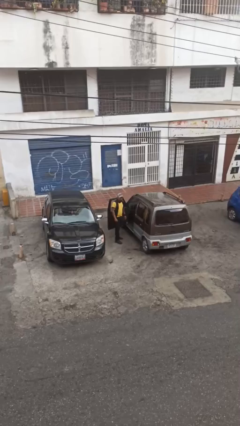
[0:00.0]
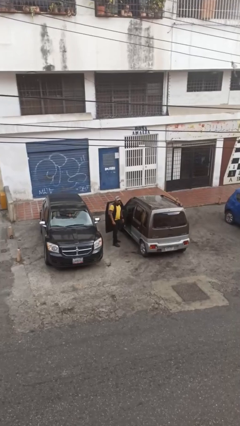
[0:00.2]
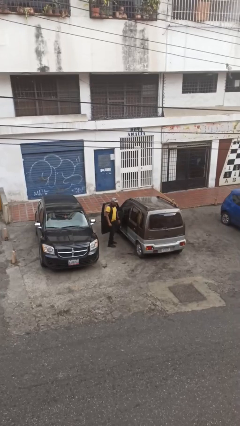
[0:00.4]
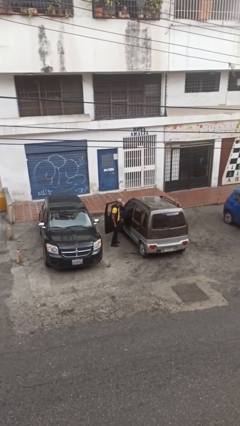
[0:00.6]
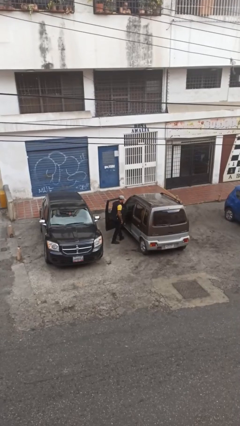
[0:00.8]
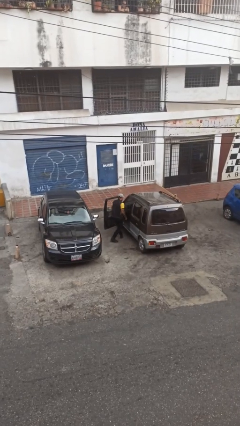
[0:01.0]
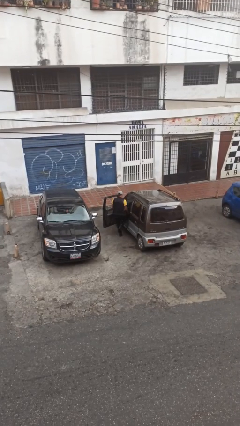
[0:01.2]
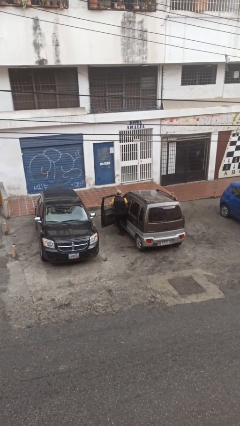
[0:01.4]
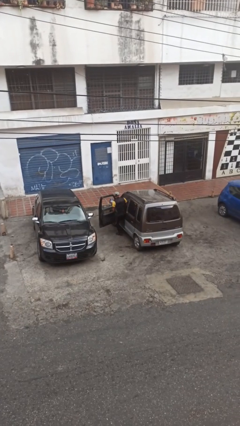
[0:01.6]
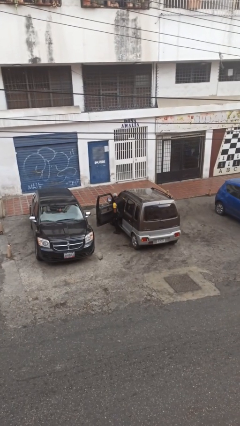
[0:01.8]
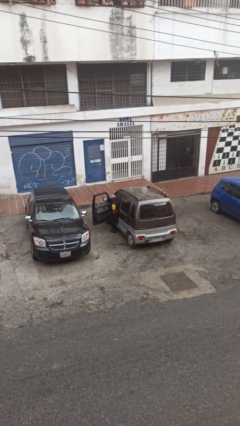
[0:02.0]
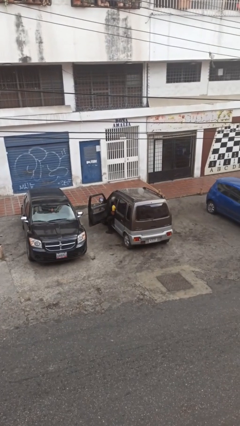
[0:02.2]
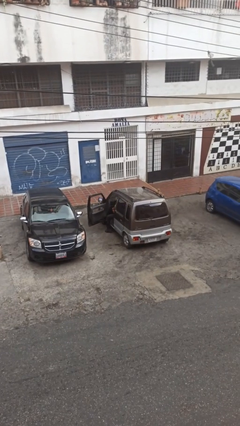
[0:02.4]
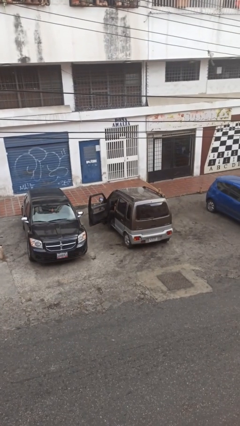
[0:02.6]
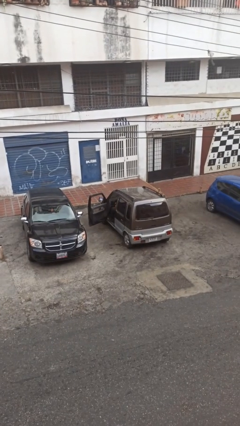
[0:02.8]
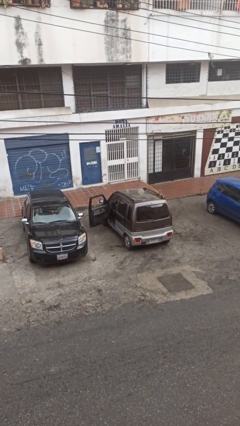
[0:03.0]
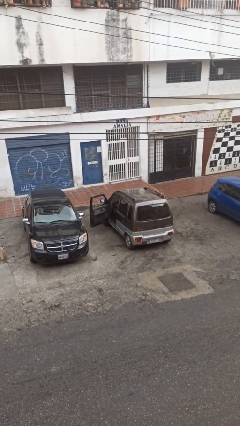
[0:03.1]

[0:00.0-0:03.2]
person enters car

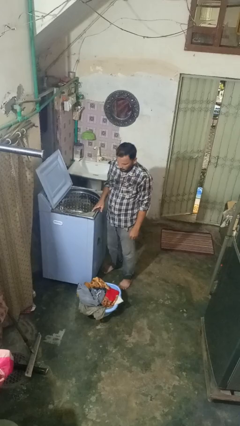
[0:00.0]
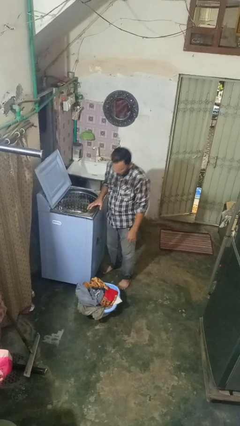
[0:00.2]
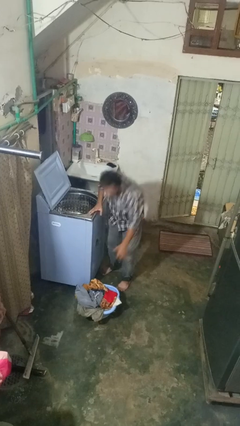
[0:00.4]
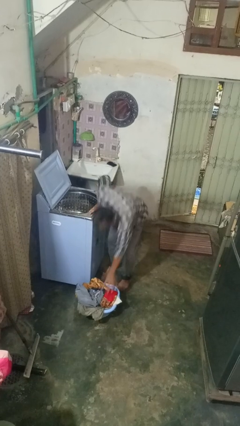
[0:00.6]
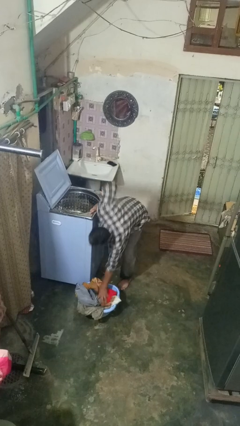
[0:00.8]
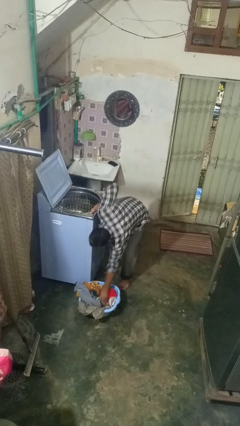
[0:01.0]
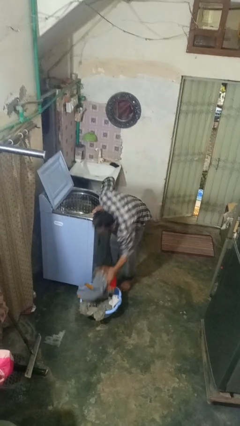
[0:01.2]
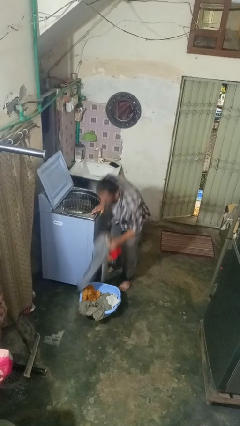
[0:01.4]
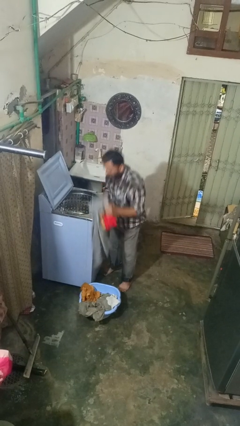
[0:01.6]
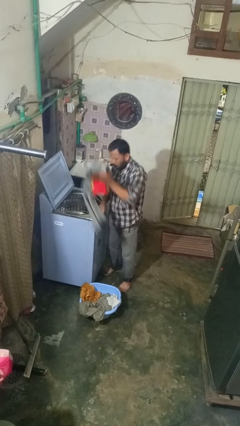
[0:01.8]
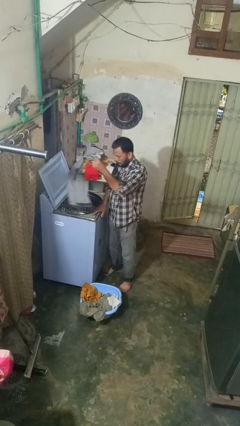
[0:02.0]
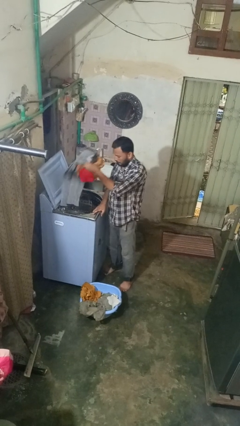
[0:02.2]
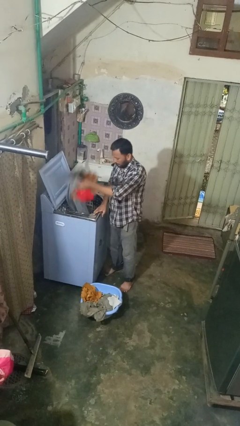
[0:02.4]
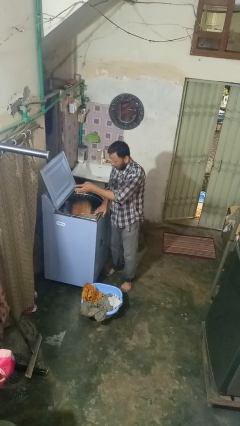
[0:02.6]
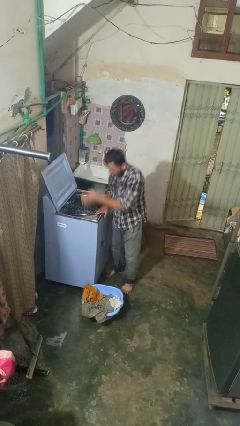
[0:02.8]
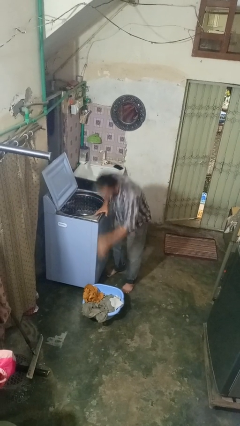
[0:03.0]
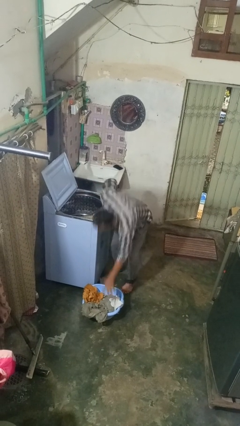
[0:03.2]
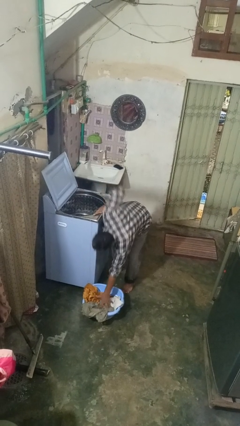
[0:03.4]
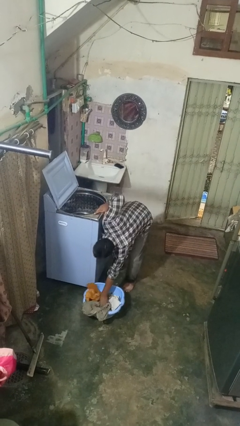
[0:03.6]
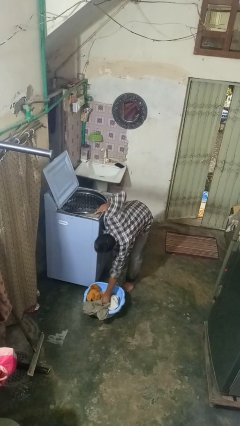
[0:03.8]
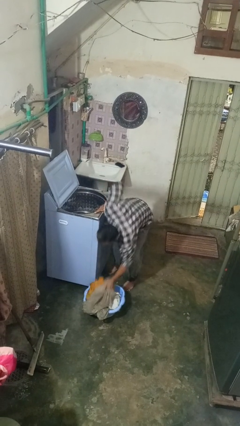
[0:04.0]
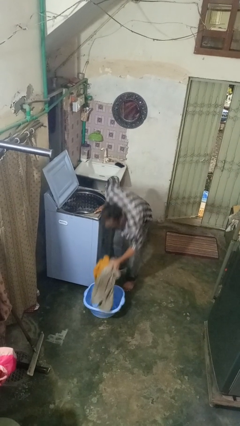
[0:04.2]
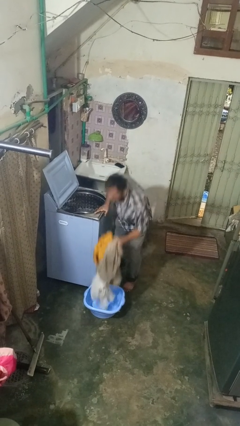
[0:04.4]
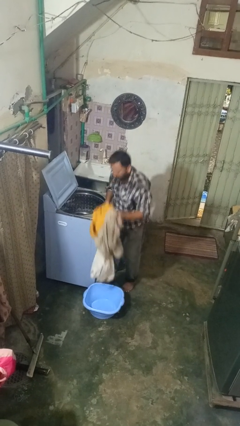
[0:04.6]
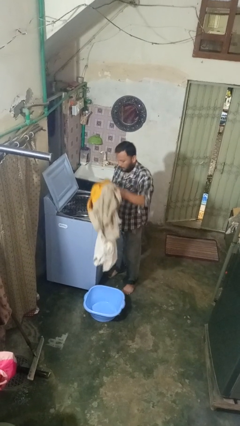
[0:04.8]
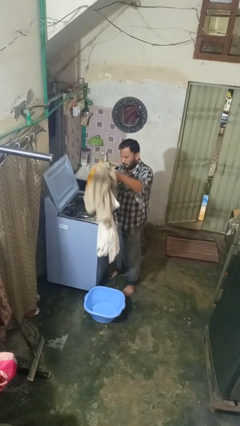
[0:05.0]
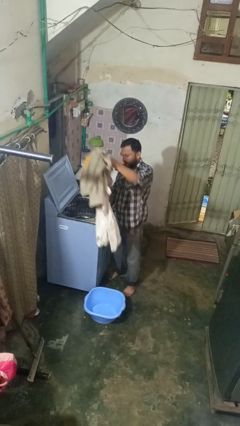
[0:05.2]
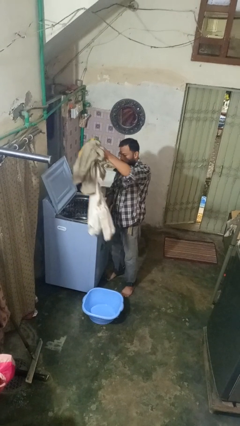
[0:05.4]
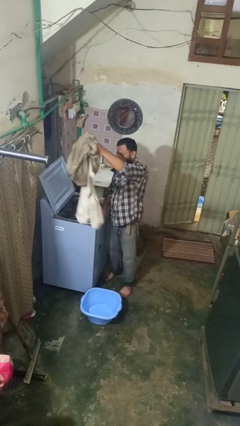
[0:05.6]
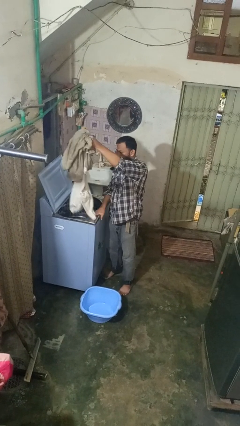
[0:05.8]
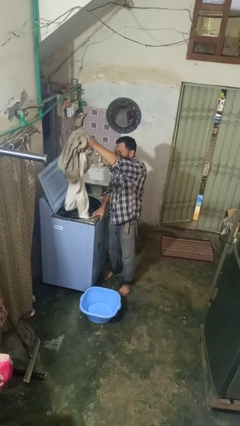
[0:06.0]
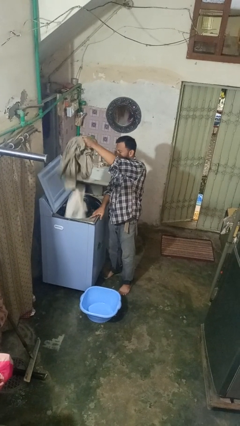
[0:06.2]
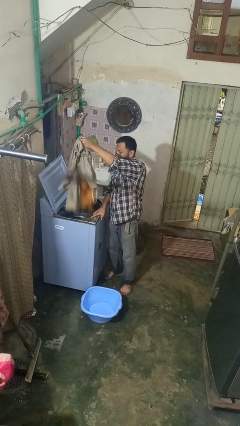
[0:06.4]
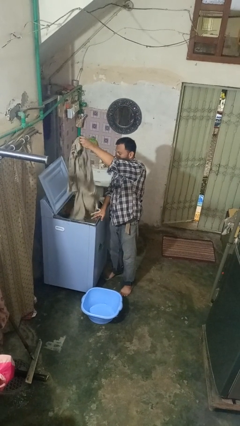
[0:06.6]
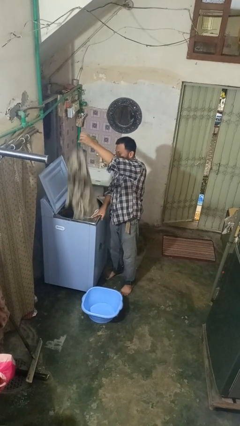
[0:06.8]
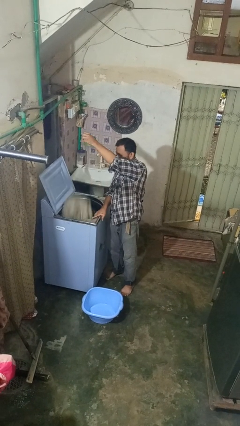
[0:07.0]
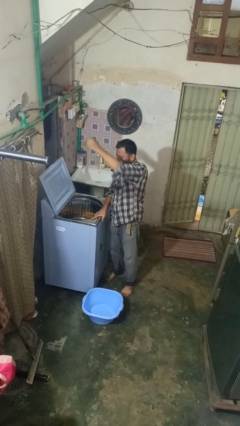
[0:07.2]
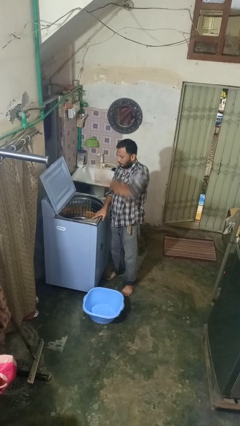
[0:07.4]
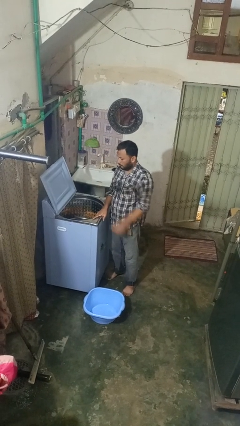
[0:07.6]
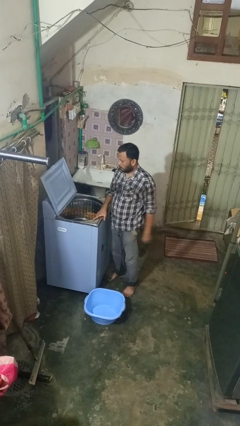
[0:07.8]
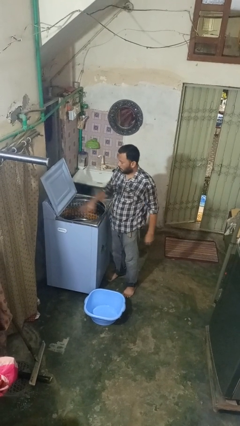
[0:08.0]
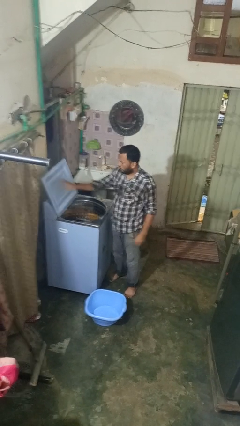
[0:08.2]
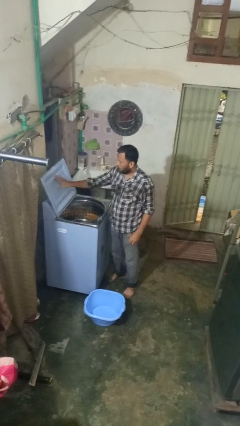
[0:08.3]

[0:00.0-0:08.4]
person loads clotheswasher

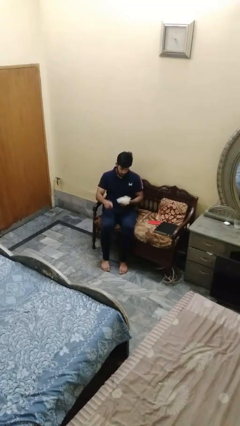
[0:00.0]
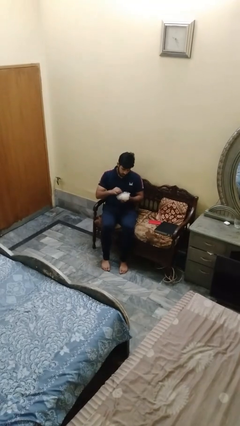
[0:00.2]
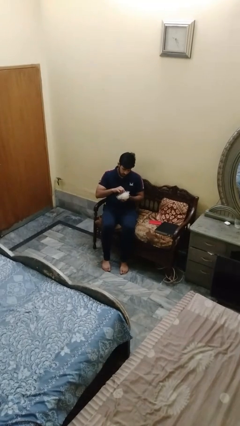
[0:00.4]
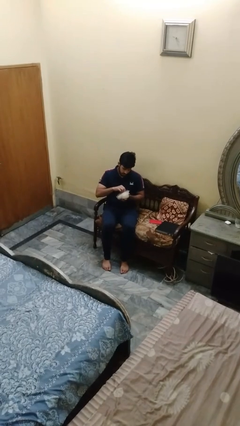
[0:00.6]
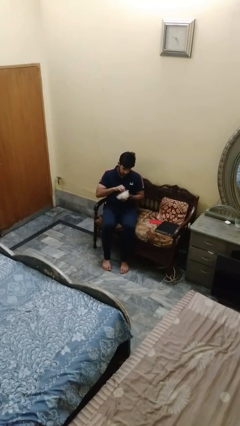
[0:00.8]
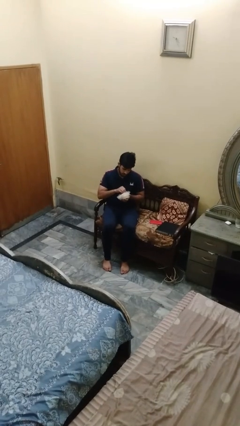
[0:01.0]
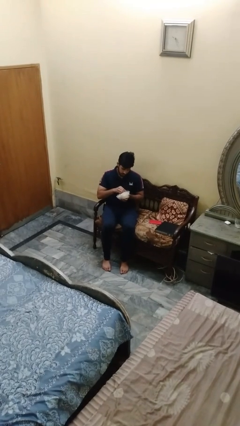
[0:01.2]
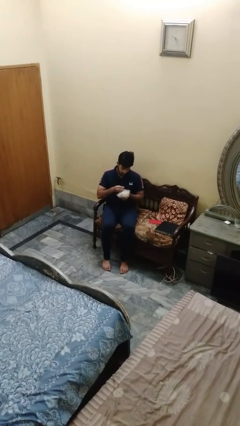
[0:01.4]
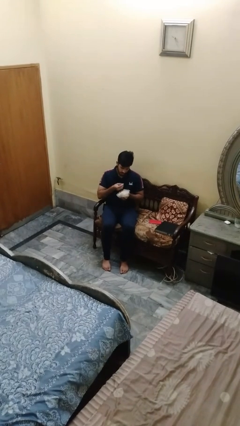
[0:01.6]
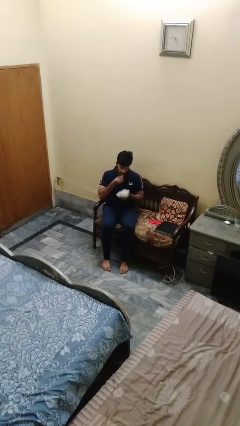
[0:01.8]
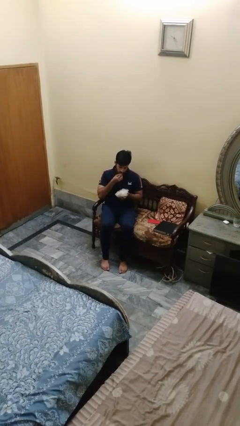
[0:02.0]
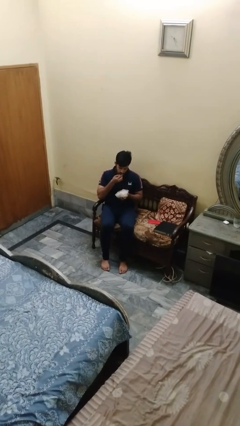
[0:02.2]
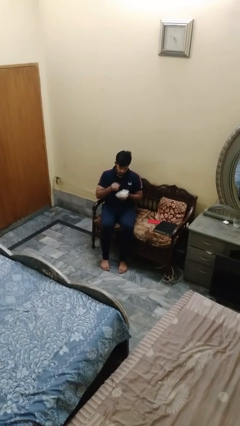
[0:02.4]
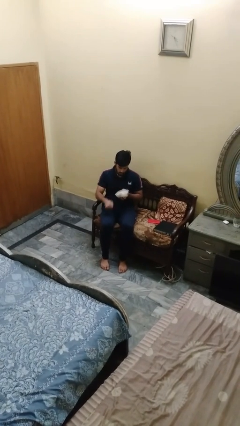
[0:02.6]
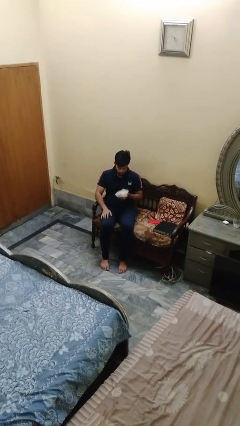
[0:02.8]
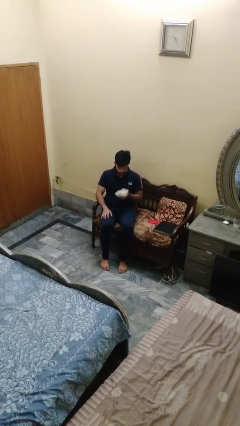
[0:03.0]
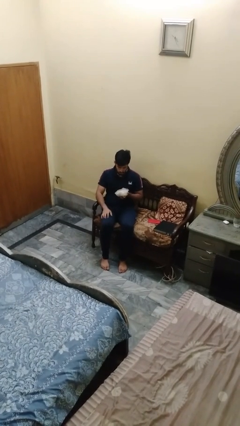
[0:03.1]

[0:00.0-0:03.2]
person eats snack from bag

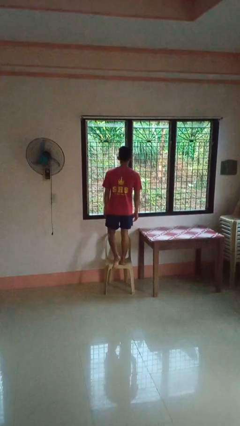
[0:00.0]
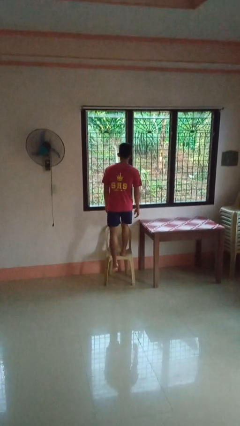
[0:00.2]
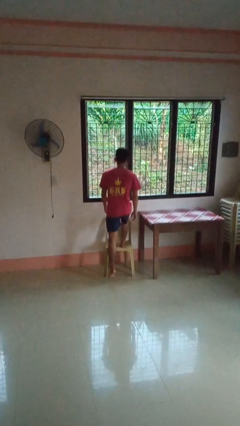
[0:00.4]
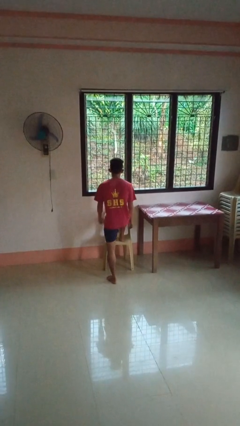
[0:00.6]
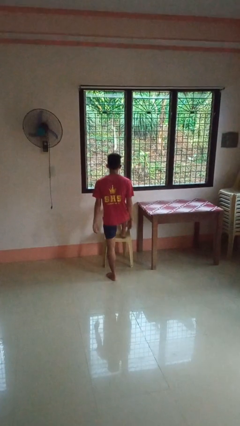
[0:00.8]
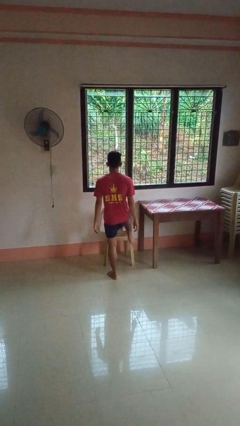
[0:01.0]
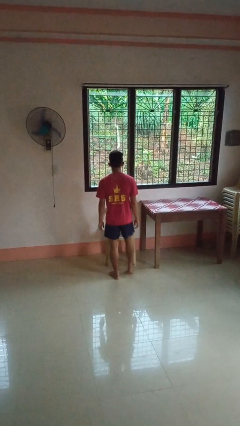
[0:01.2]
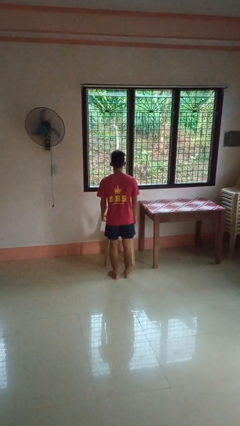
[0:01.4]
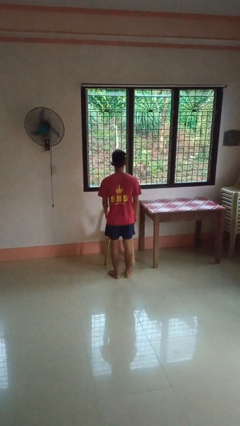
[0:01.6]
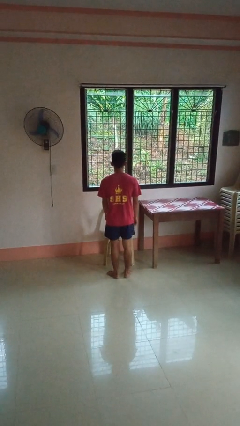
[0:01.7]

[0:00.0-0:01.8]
person climbs off chair

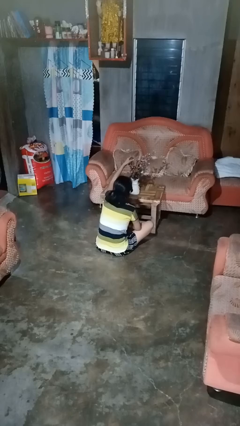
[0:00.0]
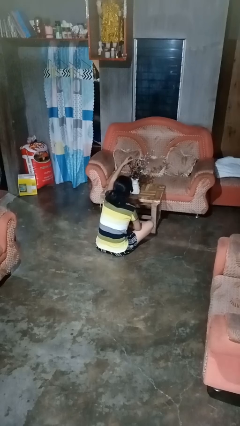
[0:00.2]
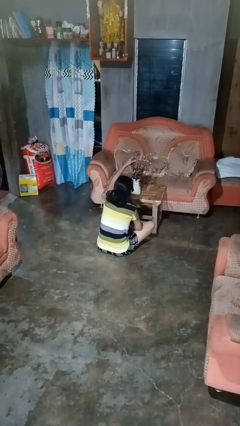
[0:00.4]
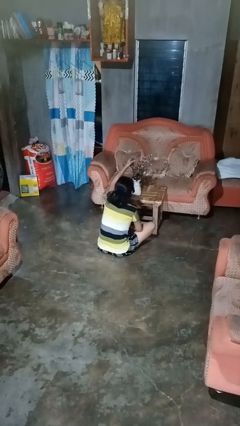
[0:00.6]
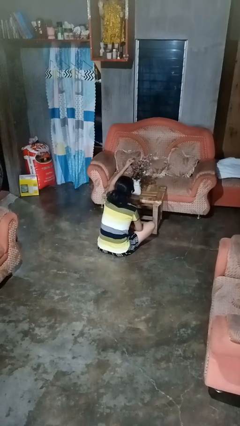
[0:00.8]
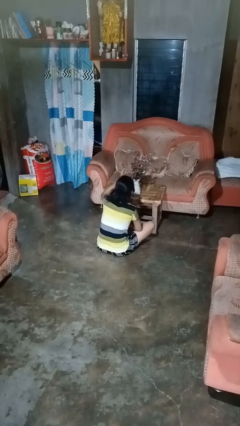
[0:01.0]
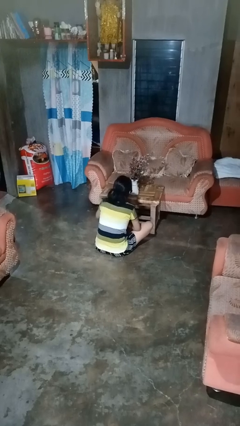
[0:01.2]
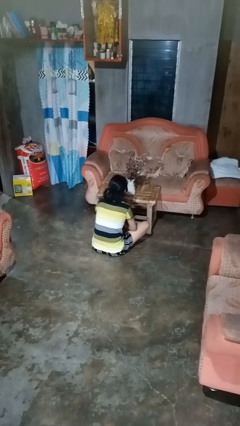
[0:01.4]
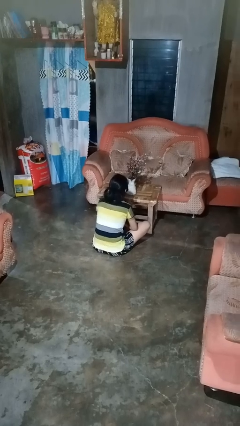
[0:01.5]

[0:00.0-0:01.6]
person arranges flowers in vase
